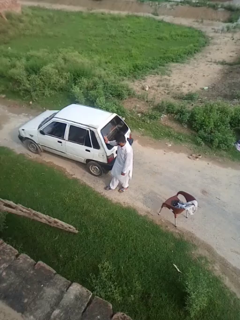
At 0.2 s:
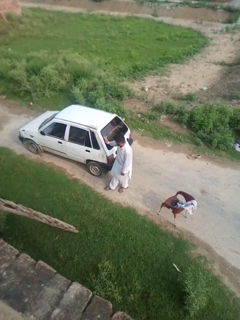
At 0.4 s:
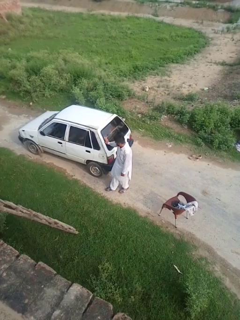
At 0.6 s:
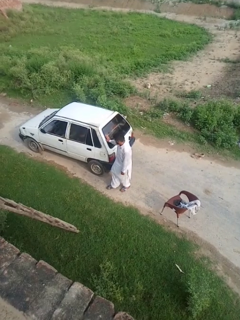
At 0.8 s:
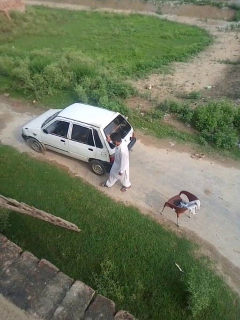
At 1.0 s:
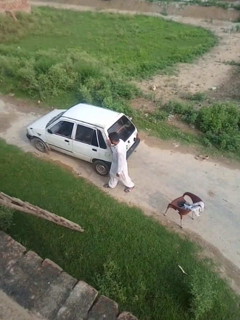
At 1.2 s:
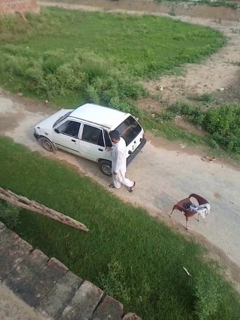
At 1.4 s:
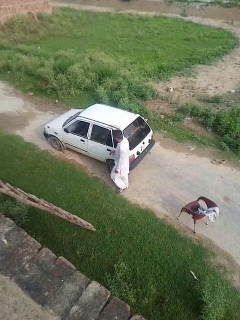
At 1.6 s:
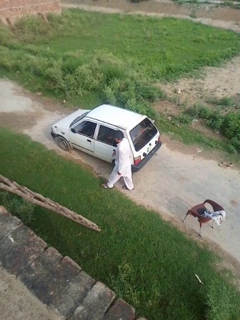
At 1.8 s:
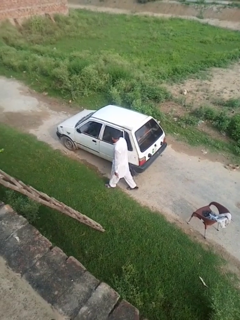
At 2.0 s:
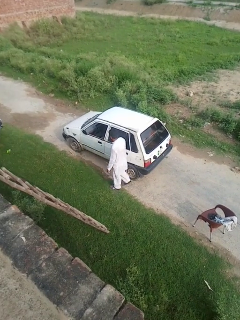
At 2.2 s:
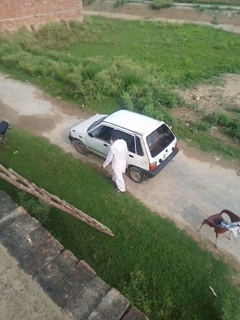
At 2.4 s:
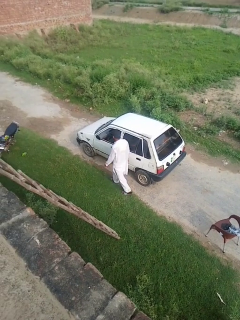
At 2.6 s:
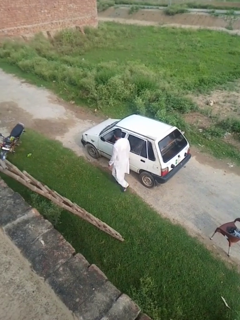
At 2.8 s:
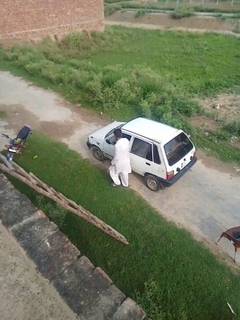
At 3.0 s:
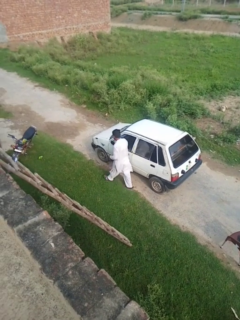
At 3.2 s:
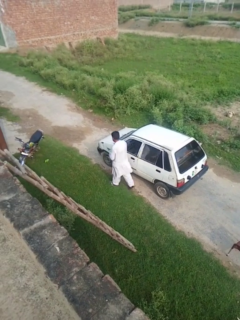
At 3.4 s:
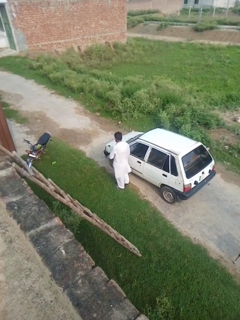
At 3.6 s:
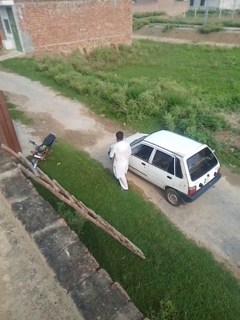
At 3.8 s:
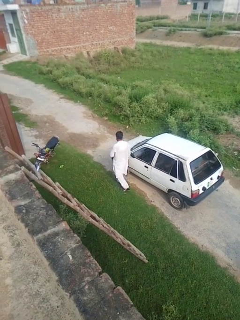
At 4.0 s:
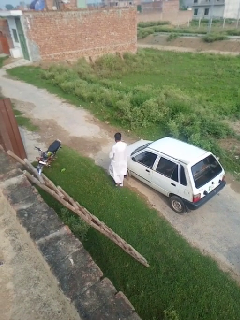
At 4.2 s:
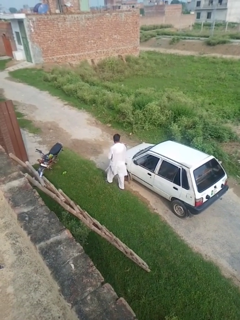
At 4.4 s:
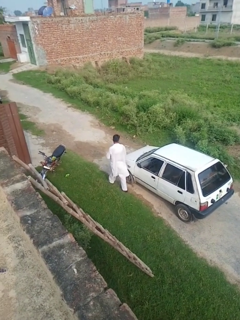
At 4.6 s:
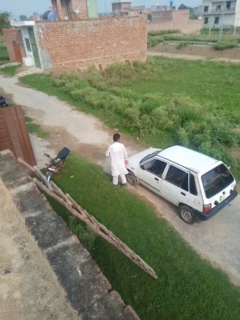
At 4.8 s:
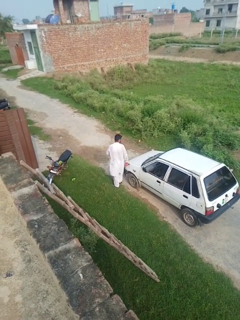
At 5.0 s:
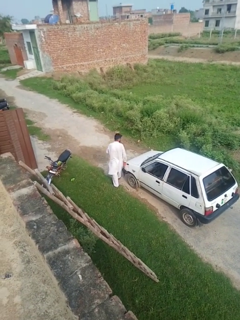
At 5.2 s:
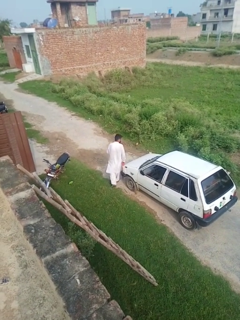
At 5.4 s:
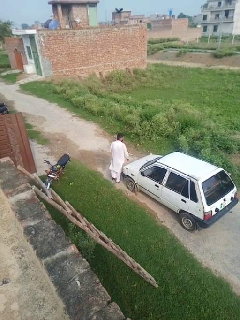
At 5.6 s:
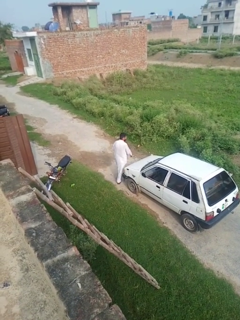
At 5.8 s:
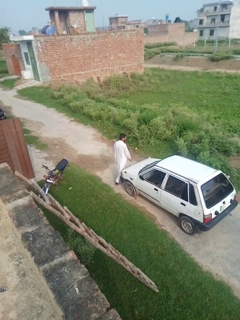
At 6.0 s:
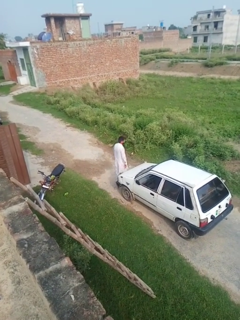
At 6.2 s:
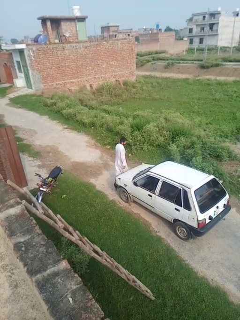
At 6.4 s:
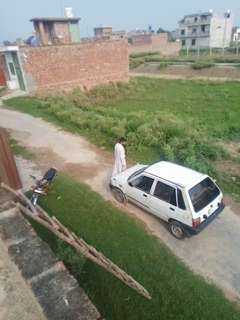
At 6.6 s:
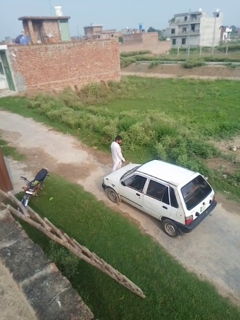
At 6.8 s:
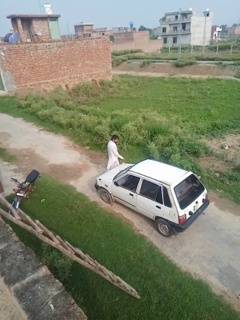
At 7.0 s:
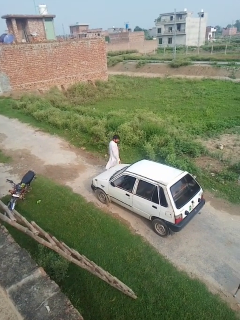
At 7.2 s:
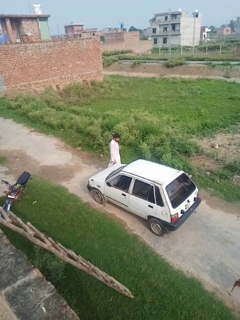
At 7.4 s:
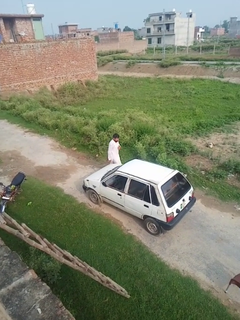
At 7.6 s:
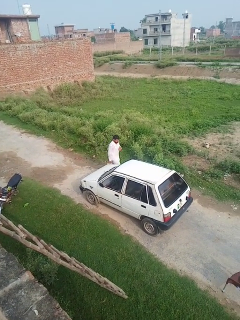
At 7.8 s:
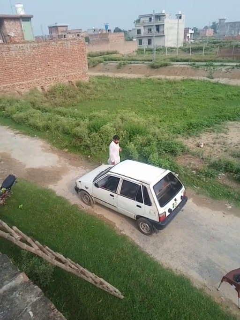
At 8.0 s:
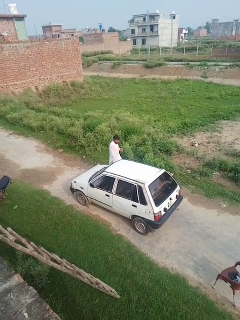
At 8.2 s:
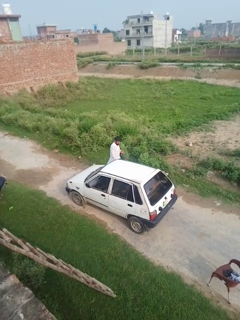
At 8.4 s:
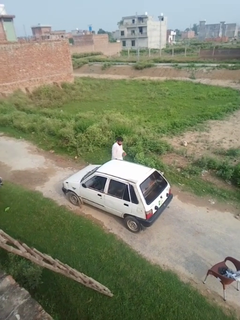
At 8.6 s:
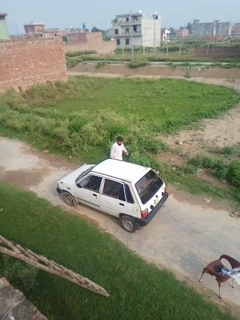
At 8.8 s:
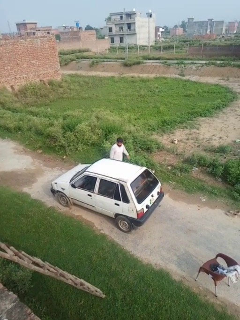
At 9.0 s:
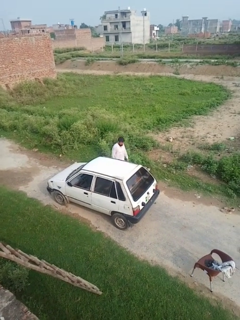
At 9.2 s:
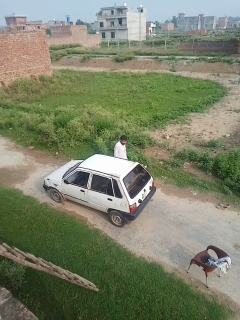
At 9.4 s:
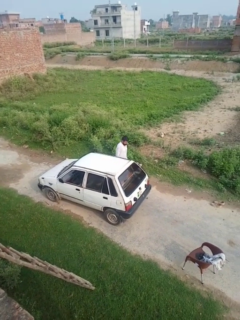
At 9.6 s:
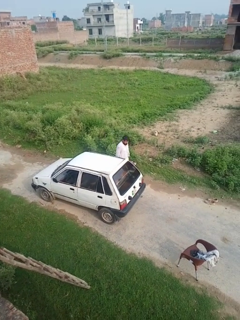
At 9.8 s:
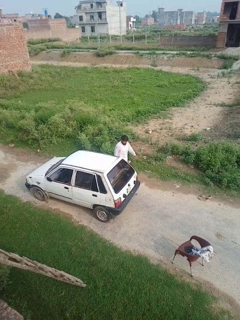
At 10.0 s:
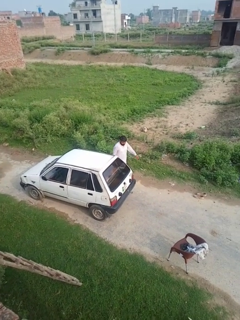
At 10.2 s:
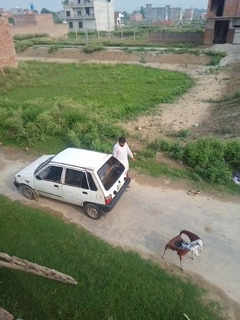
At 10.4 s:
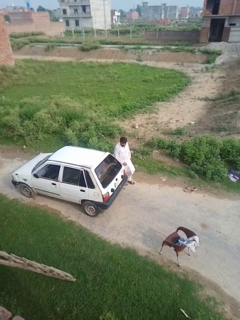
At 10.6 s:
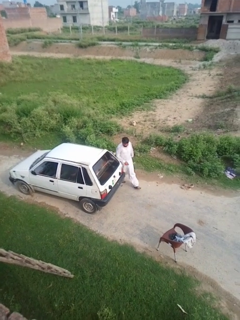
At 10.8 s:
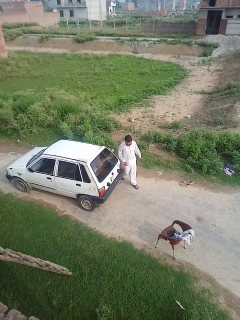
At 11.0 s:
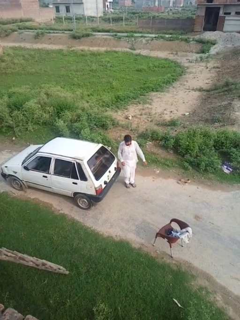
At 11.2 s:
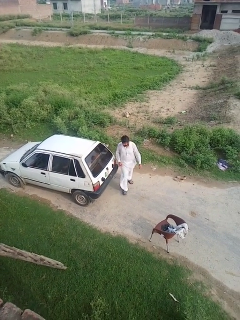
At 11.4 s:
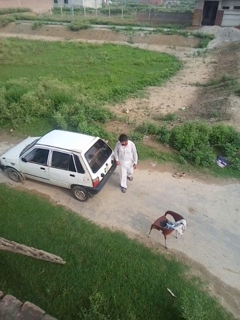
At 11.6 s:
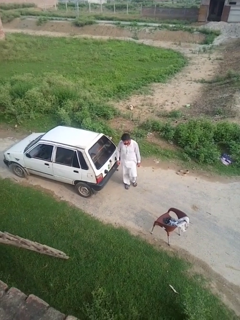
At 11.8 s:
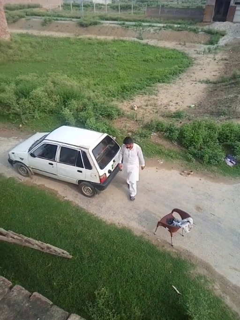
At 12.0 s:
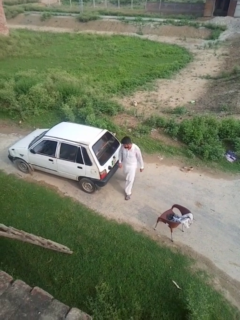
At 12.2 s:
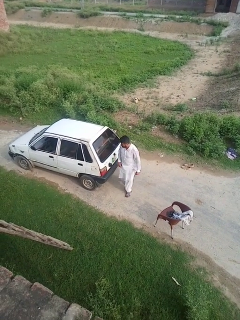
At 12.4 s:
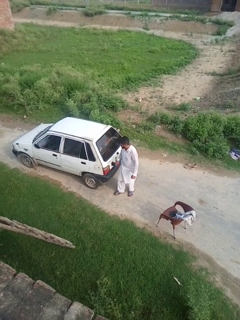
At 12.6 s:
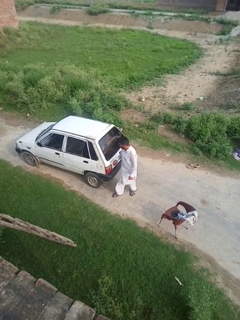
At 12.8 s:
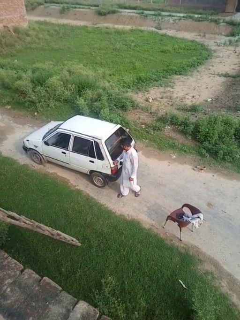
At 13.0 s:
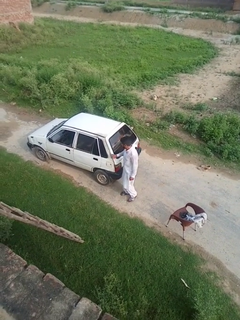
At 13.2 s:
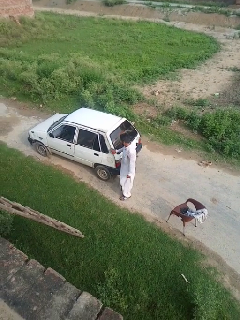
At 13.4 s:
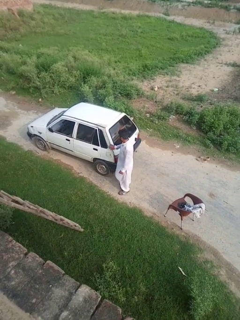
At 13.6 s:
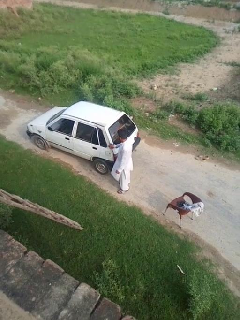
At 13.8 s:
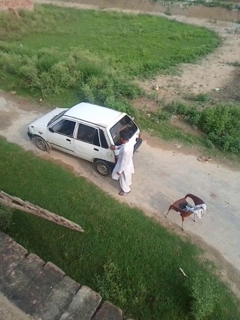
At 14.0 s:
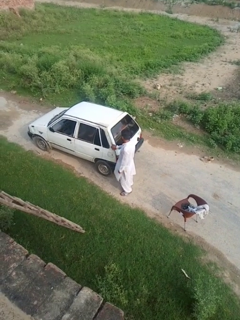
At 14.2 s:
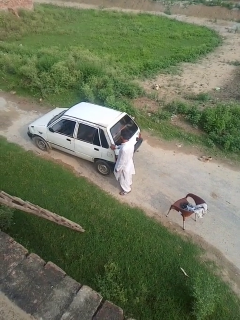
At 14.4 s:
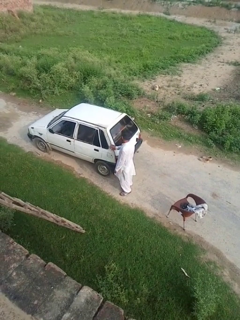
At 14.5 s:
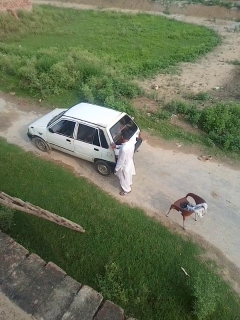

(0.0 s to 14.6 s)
person walks around car

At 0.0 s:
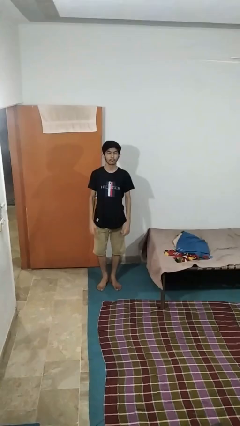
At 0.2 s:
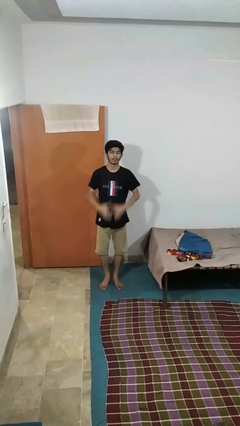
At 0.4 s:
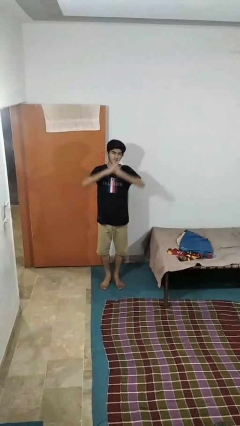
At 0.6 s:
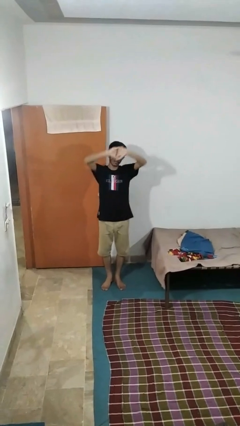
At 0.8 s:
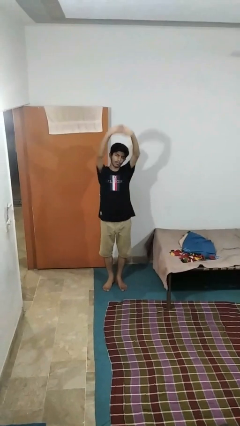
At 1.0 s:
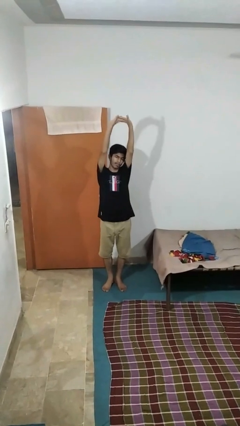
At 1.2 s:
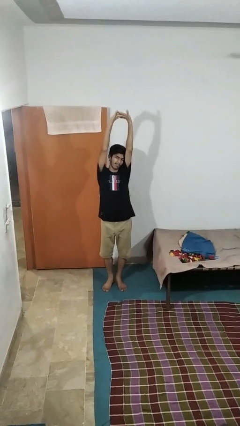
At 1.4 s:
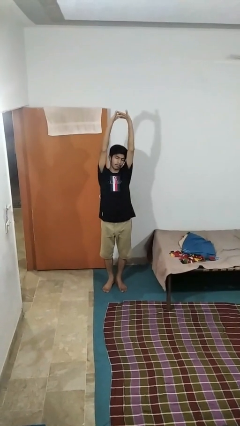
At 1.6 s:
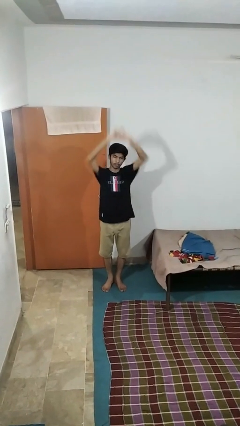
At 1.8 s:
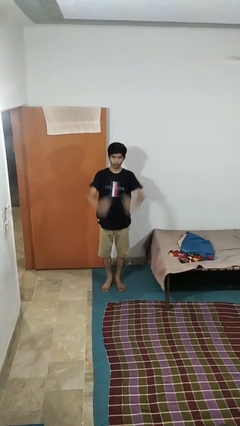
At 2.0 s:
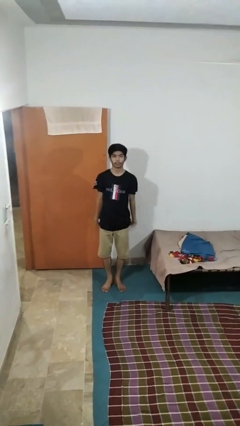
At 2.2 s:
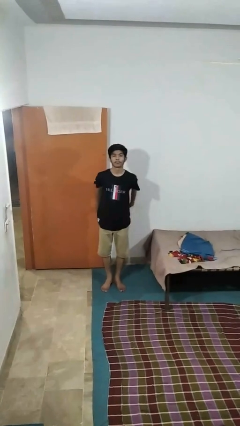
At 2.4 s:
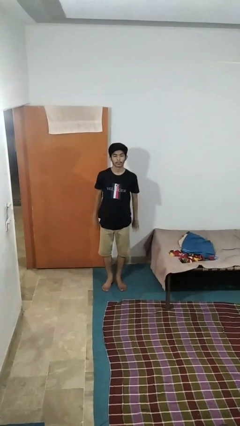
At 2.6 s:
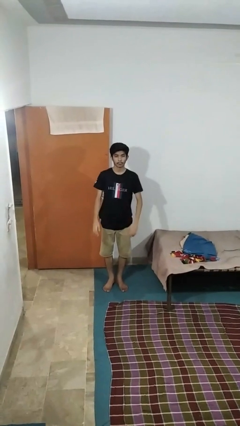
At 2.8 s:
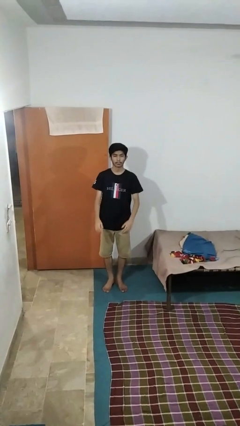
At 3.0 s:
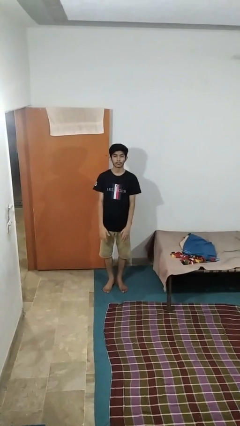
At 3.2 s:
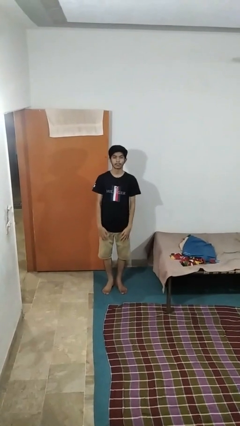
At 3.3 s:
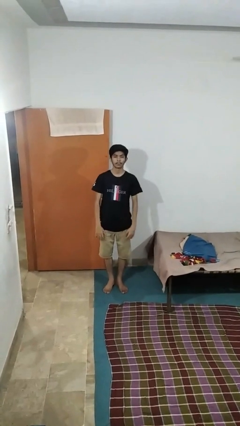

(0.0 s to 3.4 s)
person stretches arms over head

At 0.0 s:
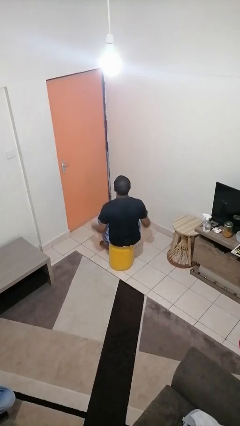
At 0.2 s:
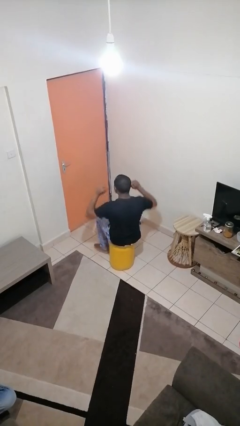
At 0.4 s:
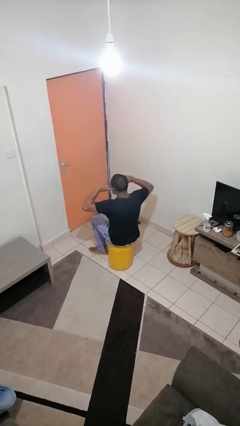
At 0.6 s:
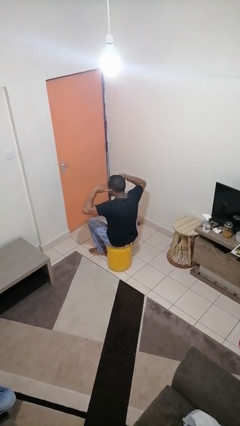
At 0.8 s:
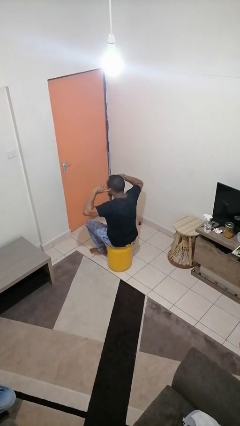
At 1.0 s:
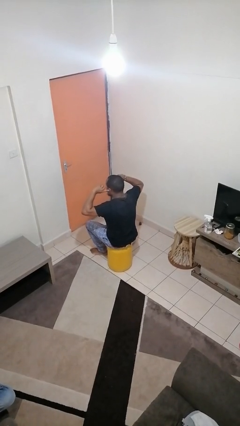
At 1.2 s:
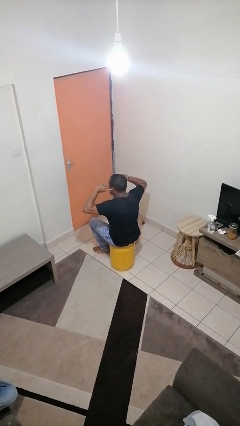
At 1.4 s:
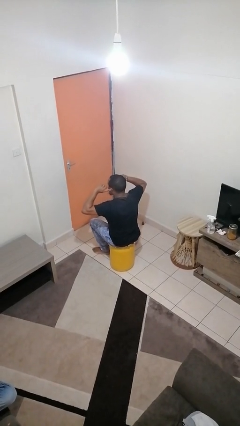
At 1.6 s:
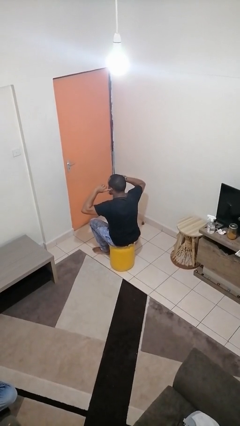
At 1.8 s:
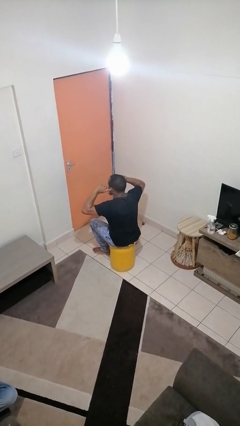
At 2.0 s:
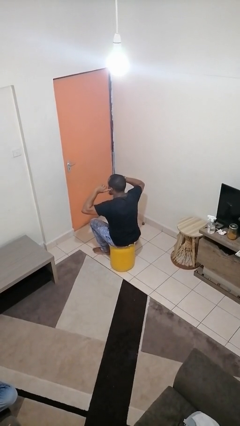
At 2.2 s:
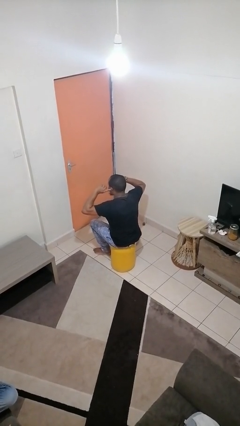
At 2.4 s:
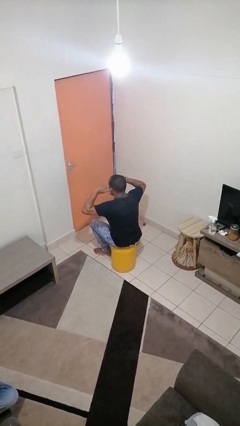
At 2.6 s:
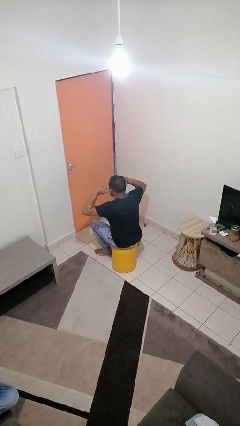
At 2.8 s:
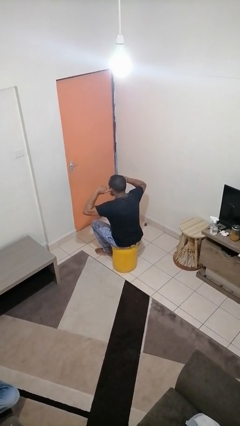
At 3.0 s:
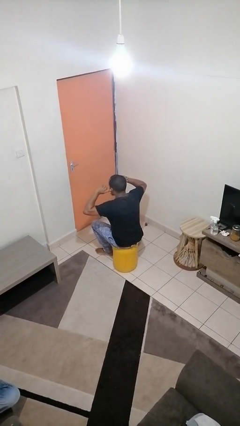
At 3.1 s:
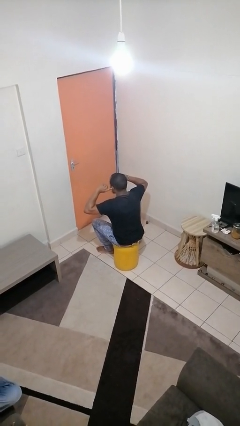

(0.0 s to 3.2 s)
person puts fingers in ear

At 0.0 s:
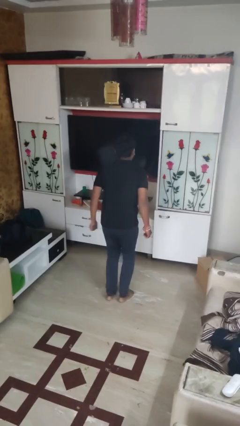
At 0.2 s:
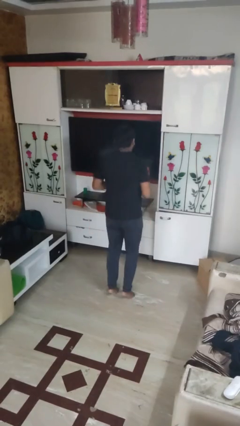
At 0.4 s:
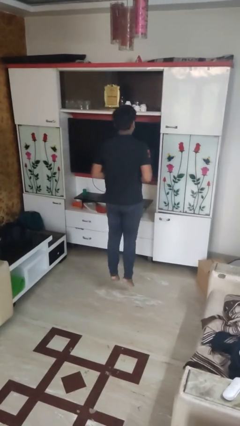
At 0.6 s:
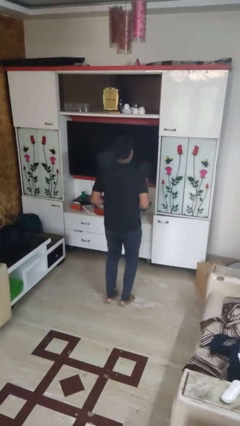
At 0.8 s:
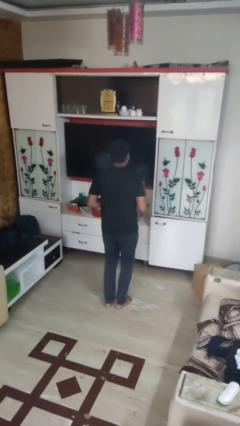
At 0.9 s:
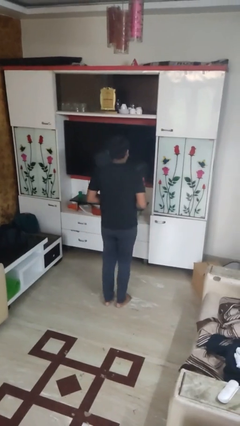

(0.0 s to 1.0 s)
person jumps
